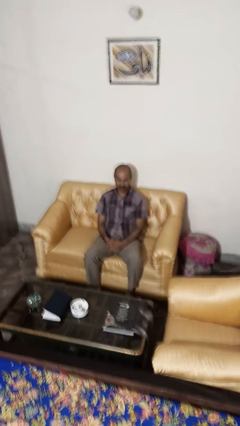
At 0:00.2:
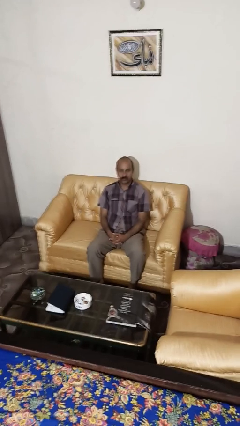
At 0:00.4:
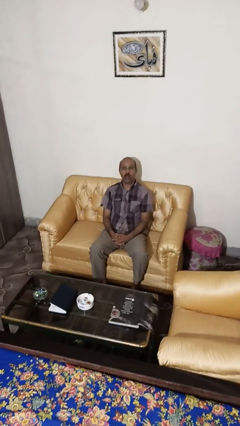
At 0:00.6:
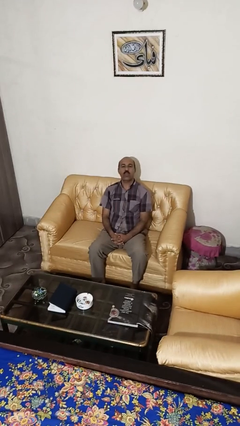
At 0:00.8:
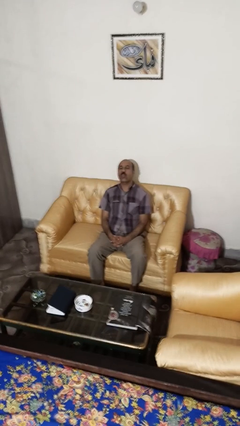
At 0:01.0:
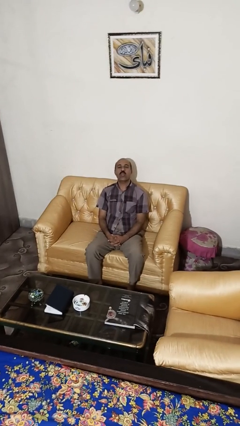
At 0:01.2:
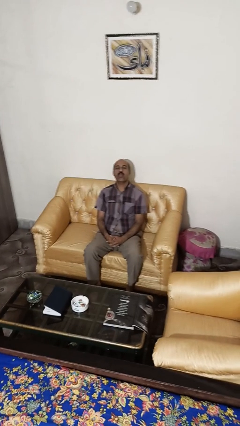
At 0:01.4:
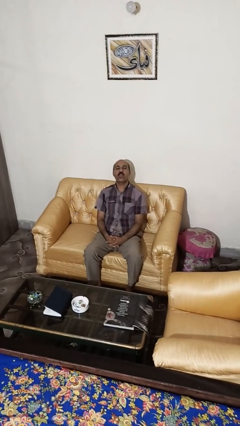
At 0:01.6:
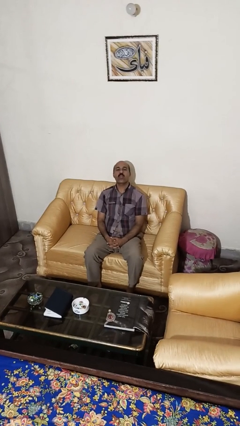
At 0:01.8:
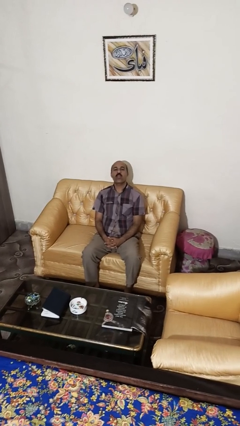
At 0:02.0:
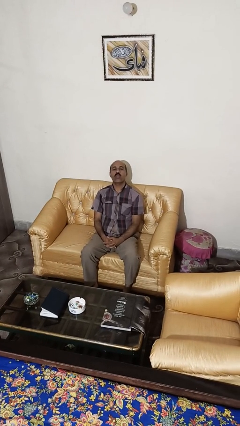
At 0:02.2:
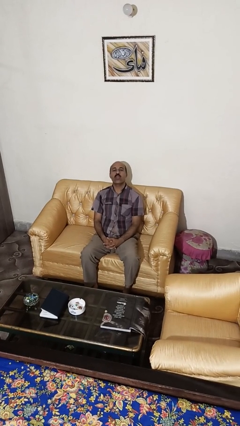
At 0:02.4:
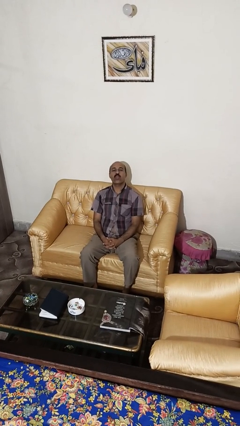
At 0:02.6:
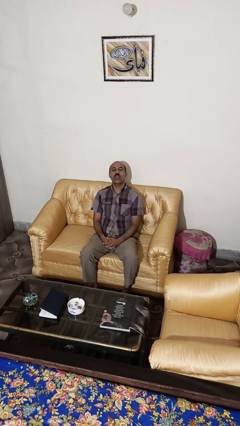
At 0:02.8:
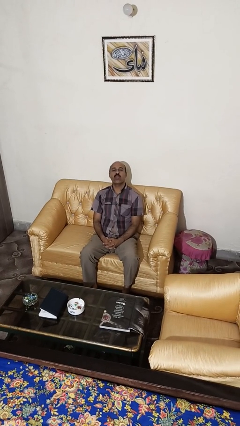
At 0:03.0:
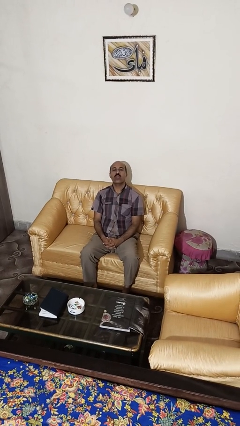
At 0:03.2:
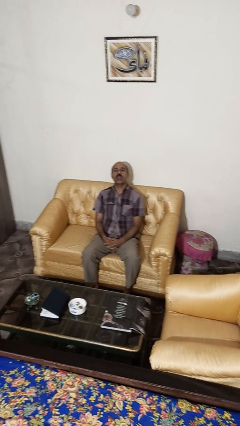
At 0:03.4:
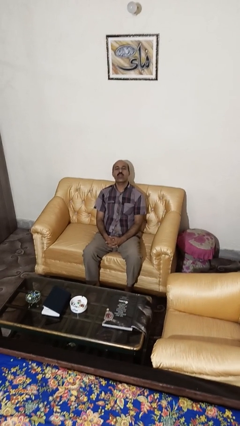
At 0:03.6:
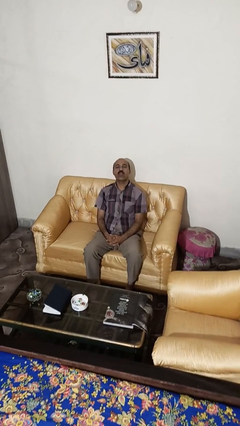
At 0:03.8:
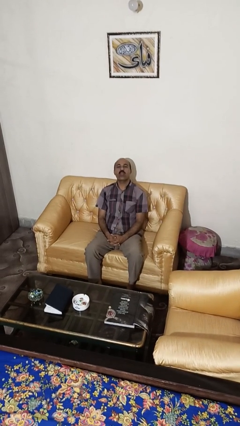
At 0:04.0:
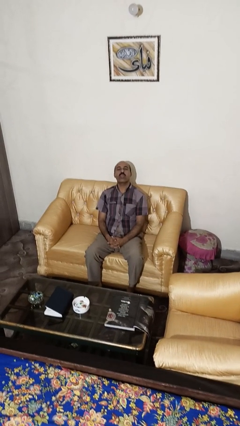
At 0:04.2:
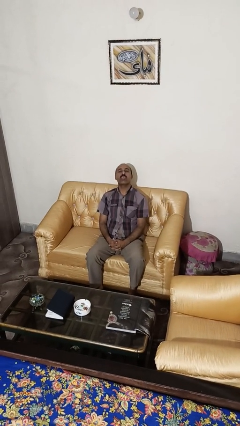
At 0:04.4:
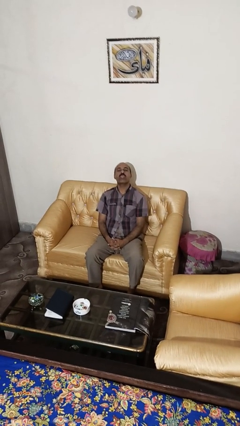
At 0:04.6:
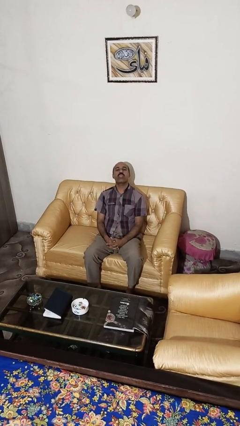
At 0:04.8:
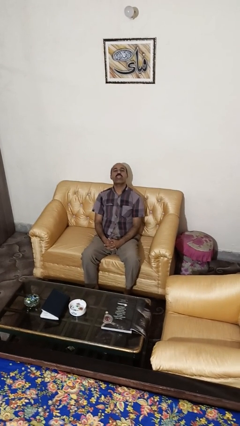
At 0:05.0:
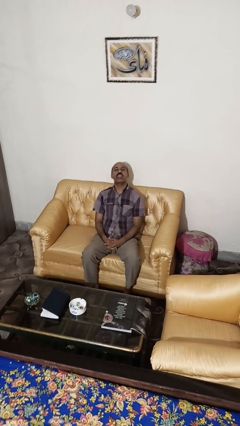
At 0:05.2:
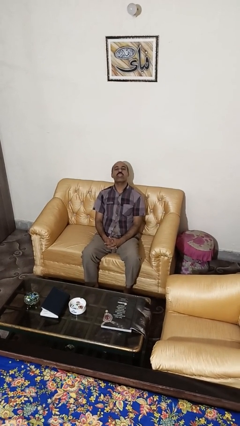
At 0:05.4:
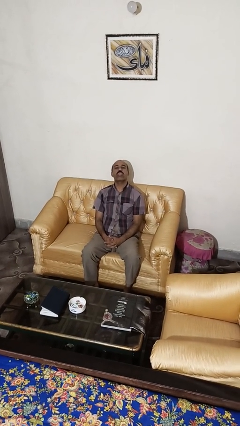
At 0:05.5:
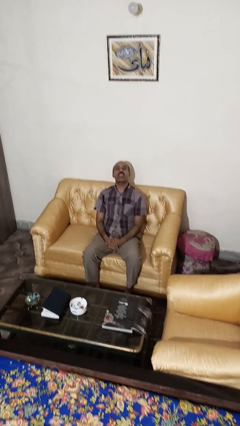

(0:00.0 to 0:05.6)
person sticks out tongue

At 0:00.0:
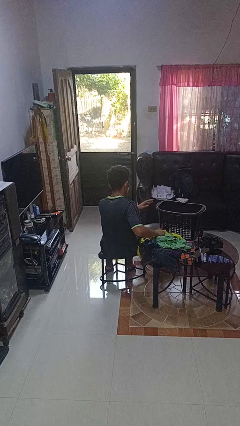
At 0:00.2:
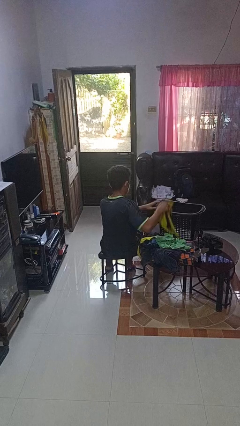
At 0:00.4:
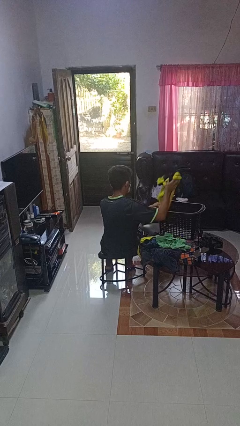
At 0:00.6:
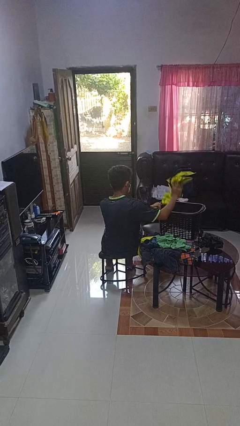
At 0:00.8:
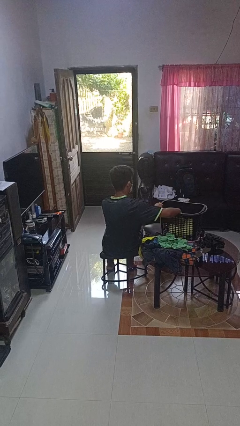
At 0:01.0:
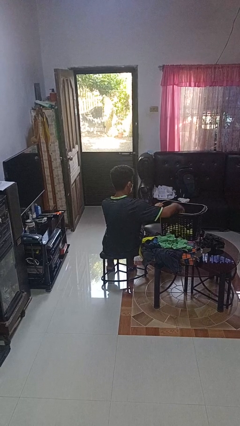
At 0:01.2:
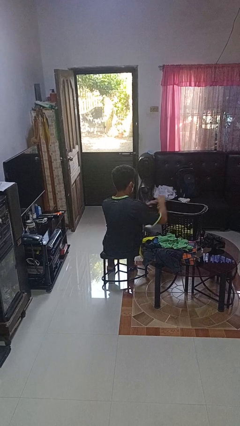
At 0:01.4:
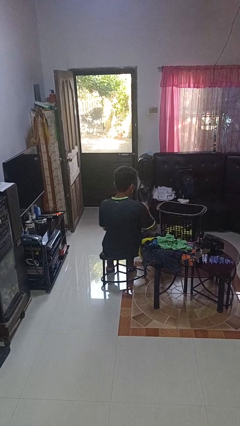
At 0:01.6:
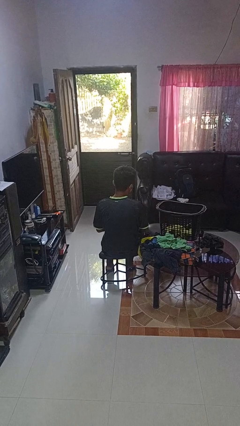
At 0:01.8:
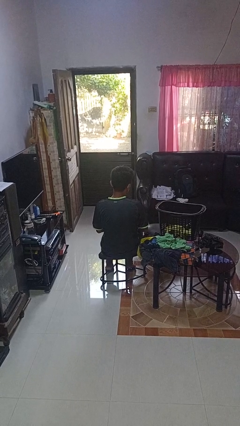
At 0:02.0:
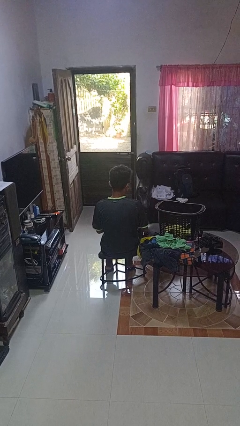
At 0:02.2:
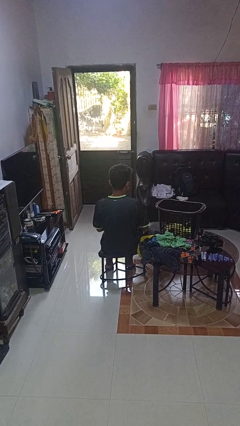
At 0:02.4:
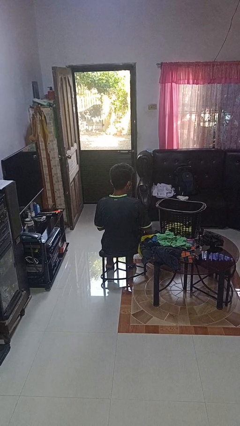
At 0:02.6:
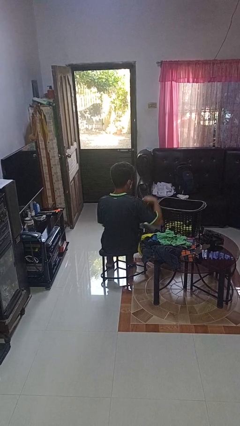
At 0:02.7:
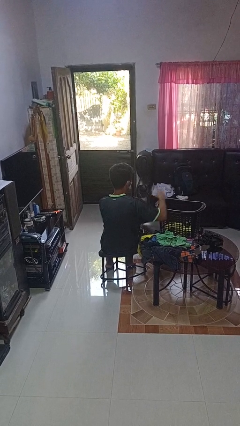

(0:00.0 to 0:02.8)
person puts object into basket

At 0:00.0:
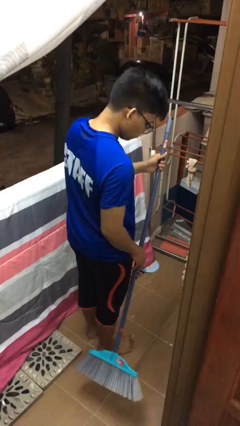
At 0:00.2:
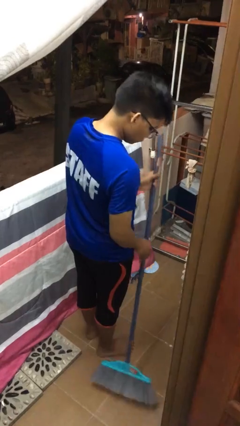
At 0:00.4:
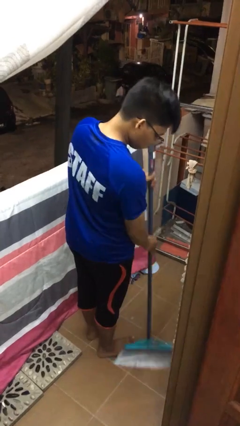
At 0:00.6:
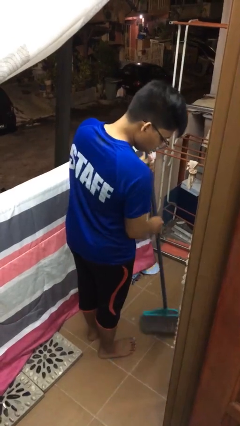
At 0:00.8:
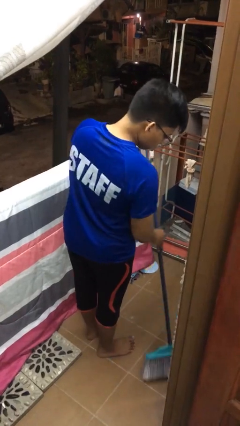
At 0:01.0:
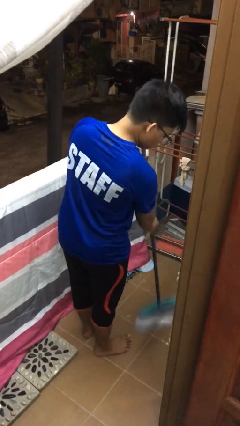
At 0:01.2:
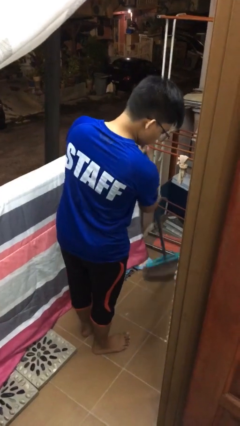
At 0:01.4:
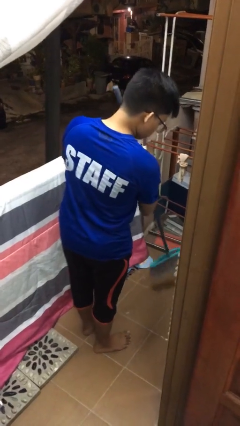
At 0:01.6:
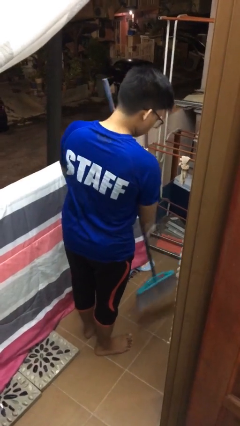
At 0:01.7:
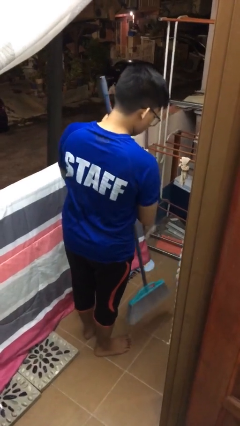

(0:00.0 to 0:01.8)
person sweeps floor

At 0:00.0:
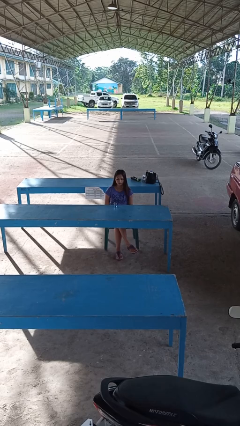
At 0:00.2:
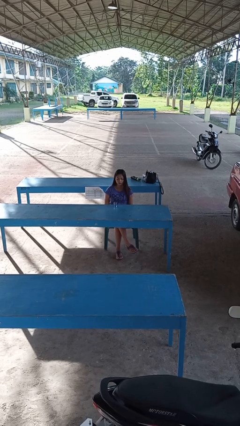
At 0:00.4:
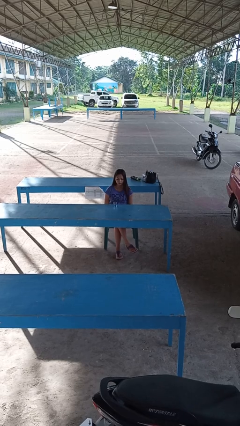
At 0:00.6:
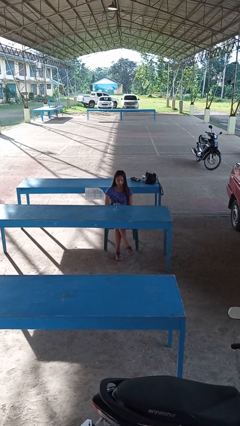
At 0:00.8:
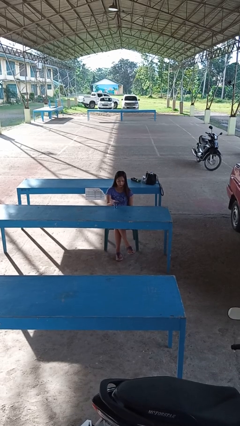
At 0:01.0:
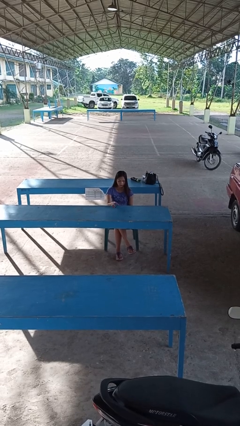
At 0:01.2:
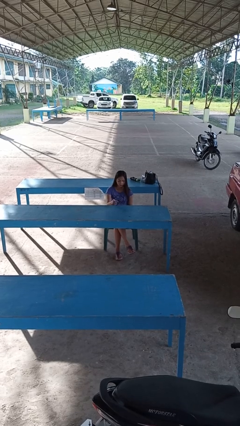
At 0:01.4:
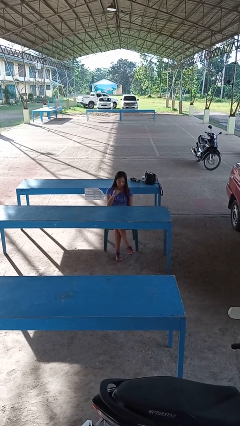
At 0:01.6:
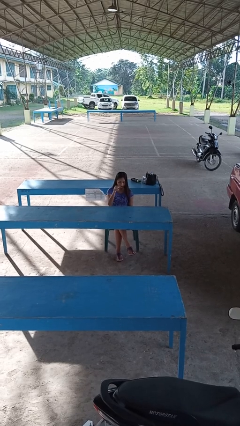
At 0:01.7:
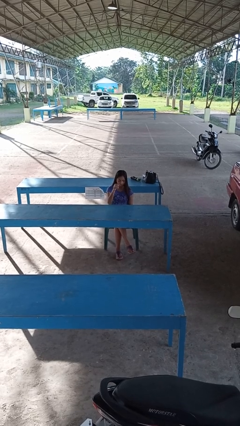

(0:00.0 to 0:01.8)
person picks up object from table

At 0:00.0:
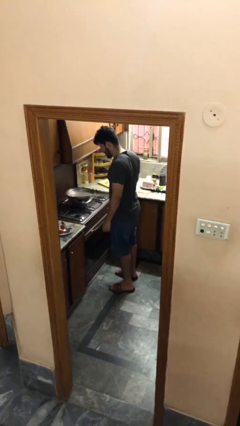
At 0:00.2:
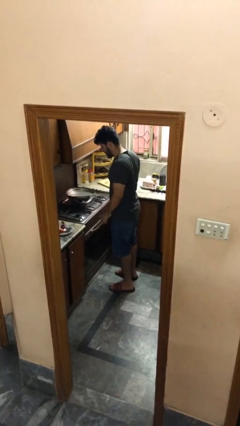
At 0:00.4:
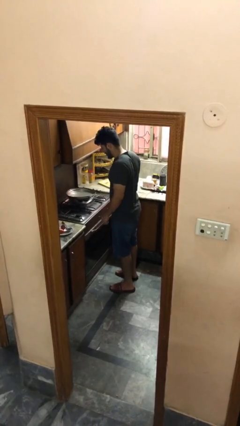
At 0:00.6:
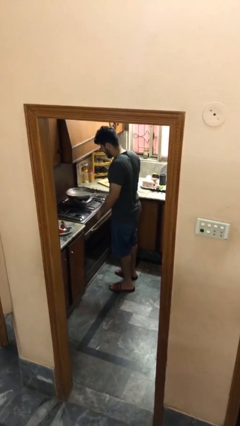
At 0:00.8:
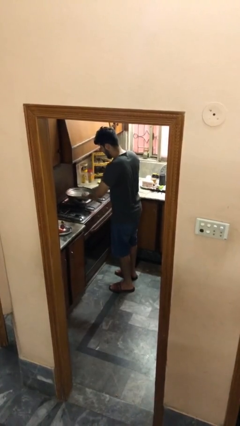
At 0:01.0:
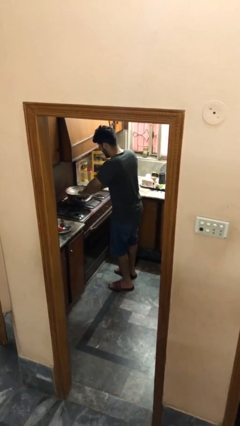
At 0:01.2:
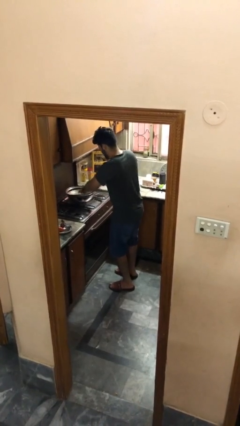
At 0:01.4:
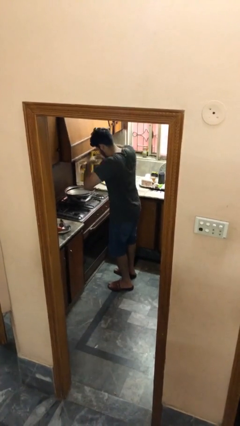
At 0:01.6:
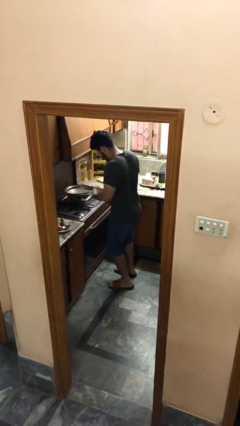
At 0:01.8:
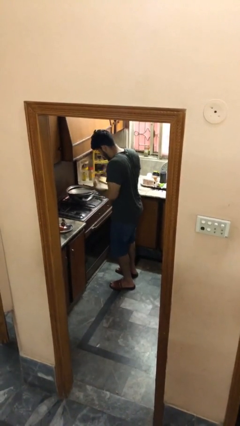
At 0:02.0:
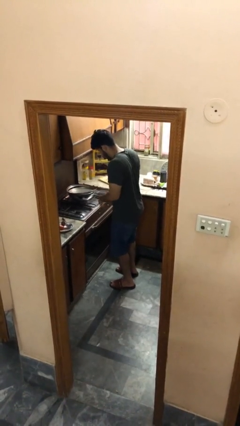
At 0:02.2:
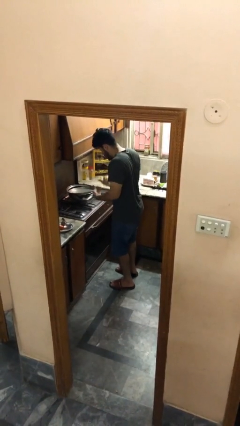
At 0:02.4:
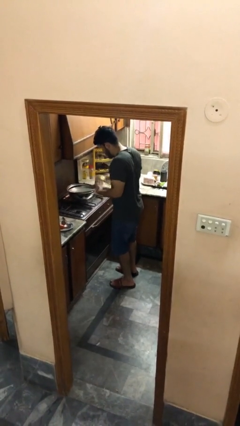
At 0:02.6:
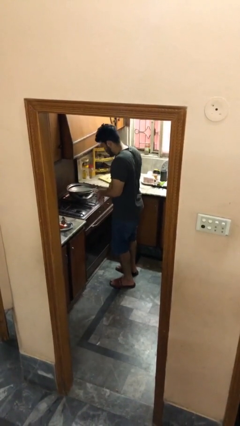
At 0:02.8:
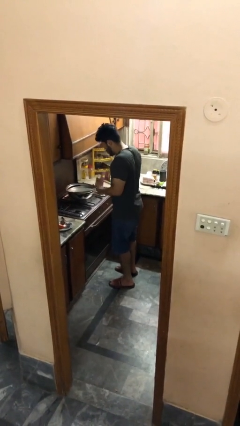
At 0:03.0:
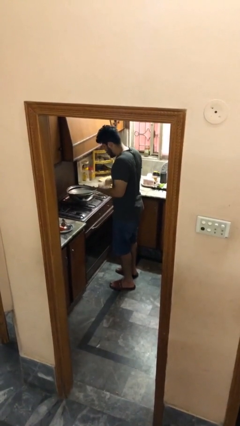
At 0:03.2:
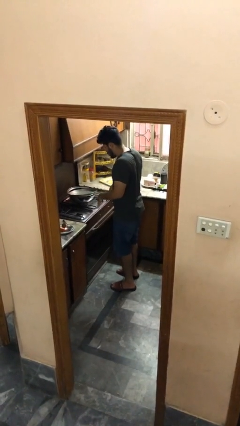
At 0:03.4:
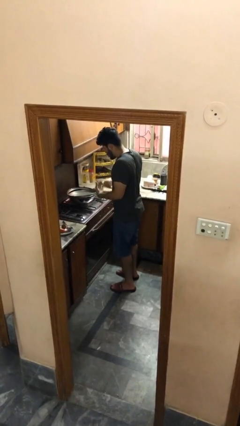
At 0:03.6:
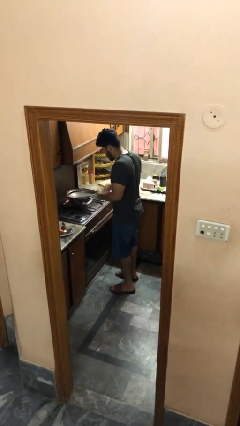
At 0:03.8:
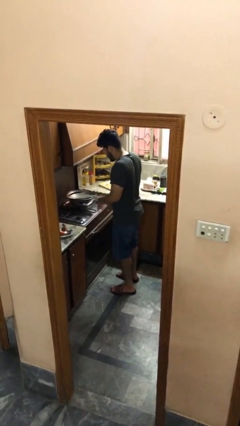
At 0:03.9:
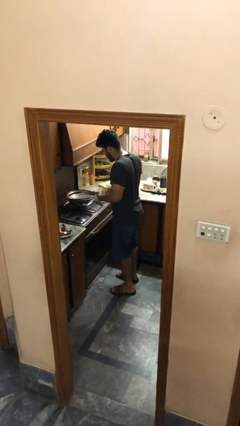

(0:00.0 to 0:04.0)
person burns hand

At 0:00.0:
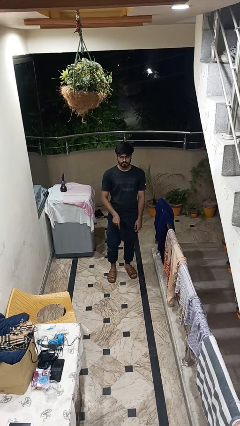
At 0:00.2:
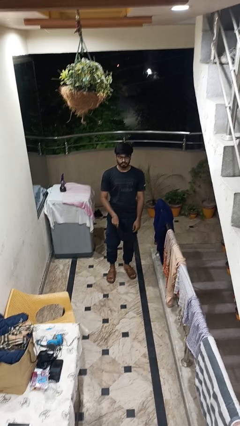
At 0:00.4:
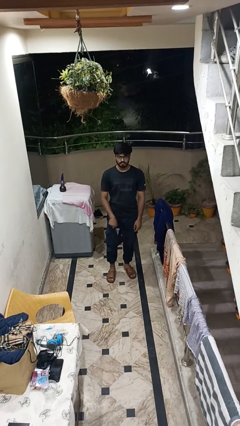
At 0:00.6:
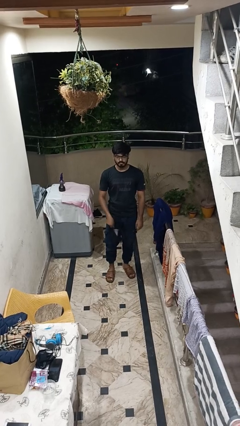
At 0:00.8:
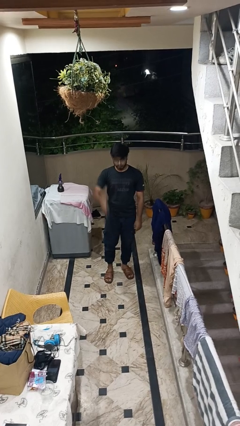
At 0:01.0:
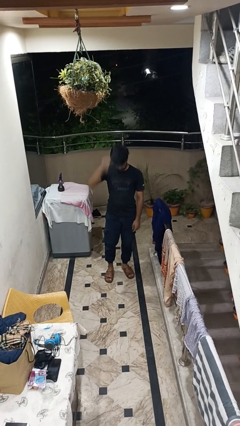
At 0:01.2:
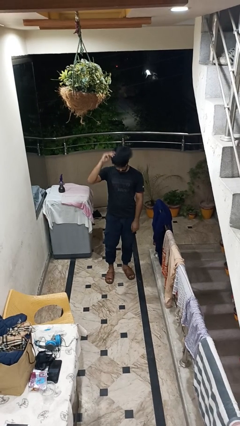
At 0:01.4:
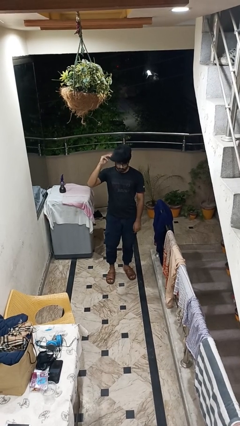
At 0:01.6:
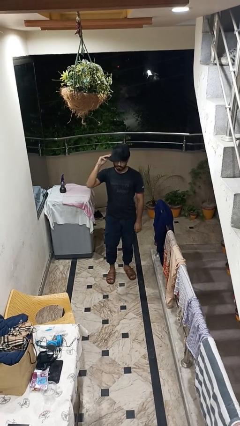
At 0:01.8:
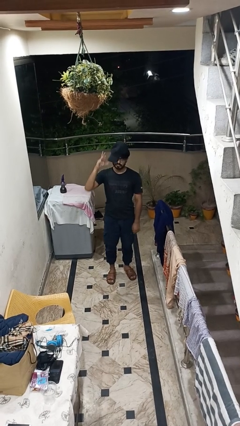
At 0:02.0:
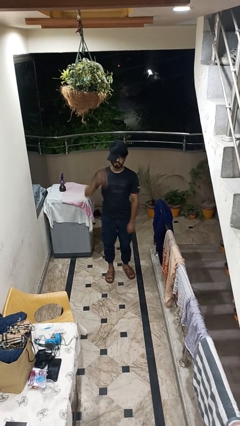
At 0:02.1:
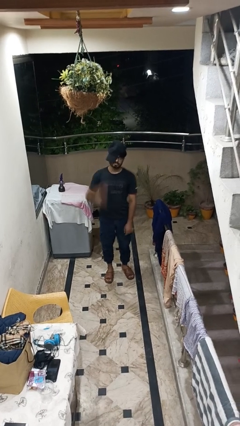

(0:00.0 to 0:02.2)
person puts on hat
